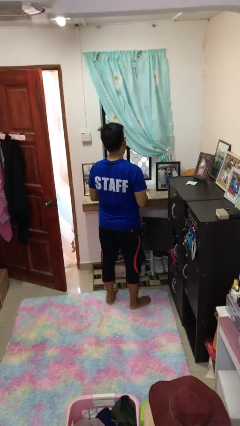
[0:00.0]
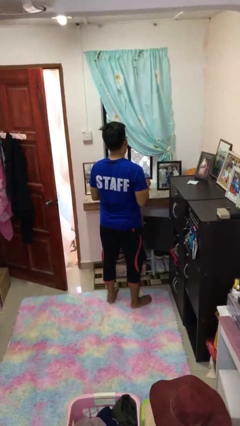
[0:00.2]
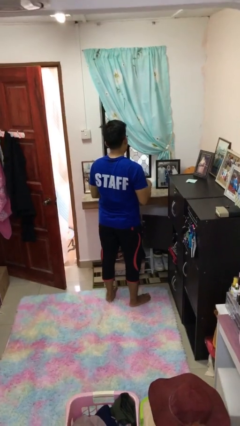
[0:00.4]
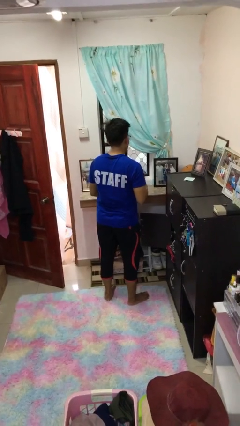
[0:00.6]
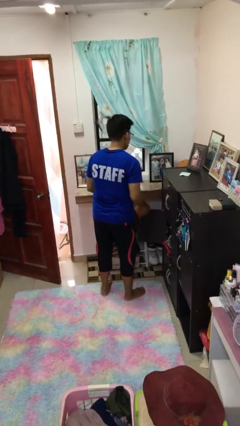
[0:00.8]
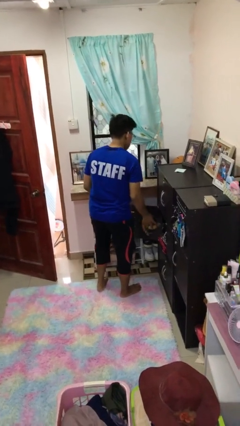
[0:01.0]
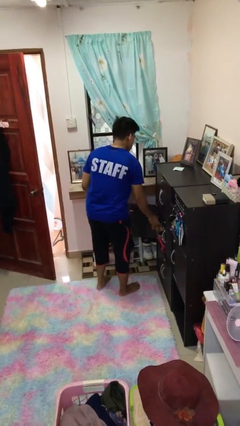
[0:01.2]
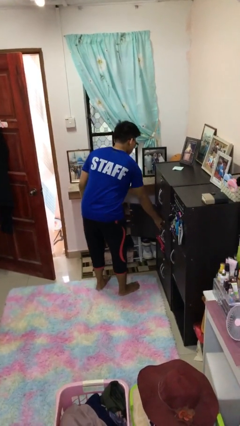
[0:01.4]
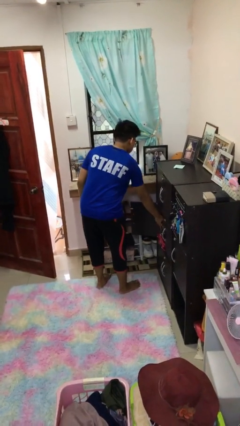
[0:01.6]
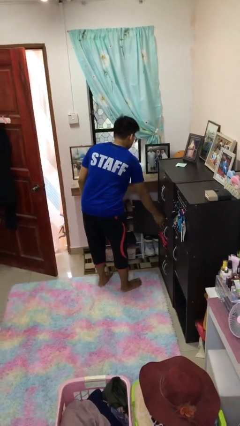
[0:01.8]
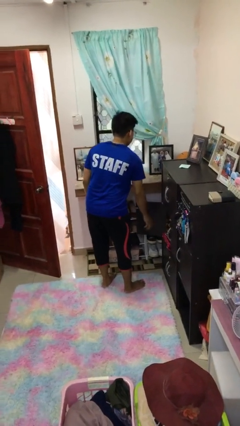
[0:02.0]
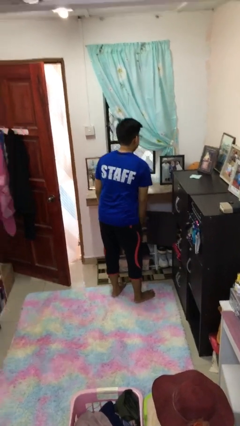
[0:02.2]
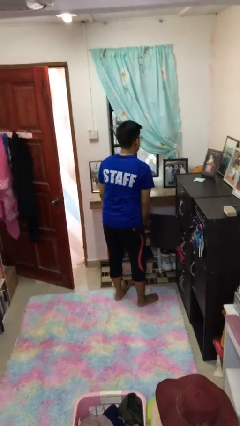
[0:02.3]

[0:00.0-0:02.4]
person puts down object into cabinet

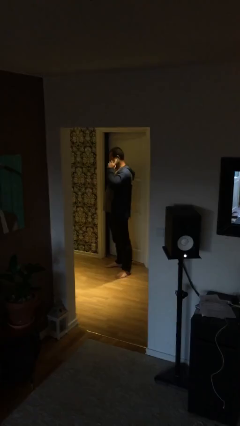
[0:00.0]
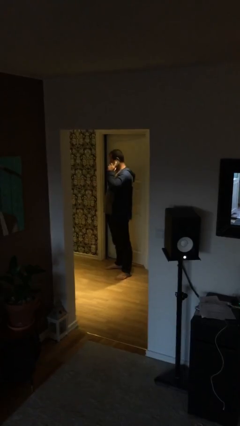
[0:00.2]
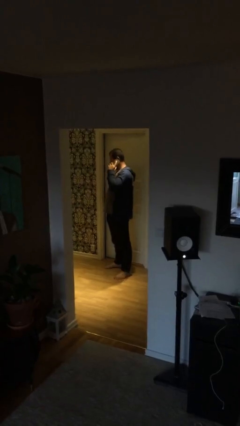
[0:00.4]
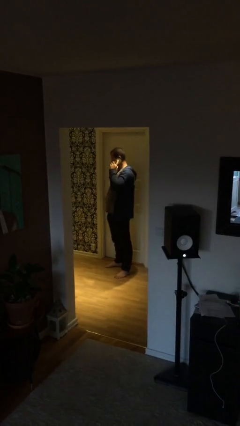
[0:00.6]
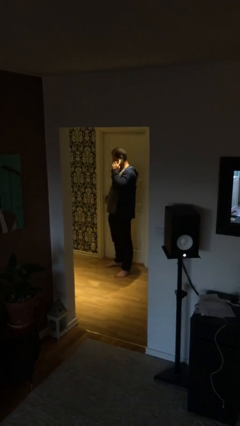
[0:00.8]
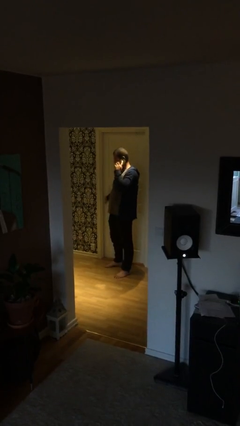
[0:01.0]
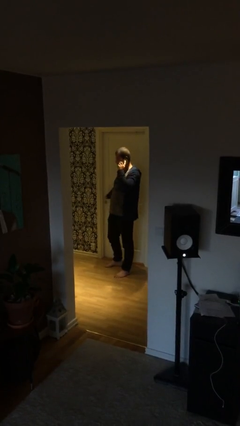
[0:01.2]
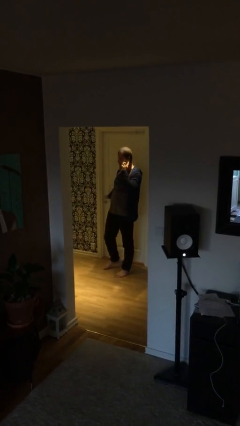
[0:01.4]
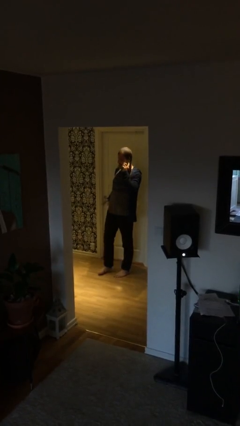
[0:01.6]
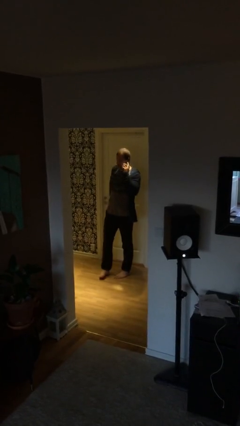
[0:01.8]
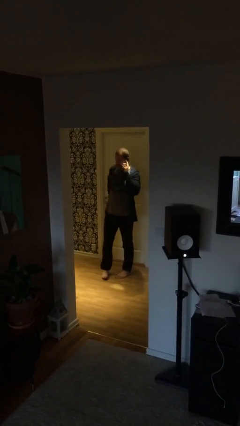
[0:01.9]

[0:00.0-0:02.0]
person closes facility door

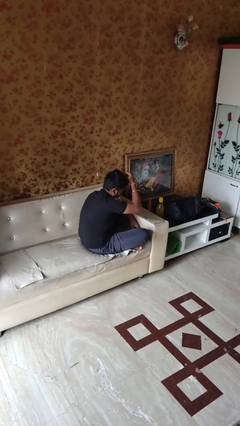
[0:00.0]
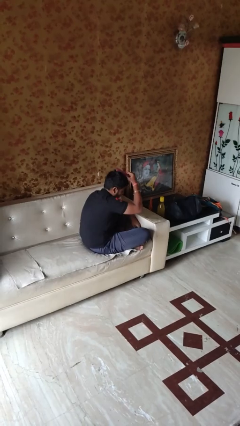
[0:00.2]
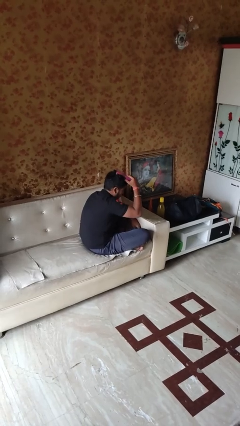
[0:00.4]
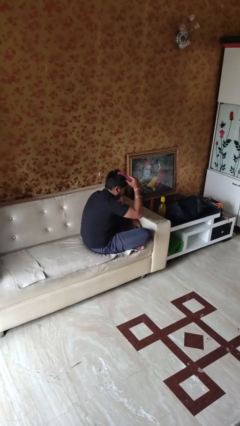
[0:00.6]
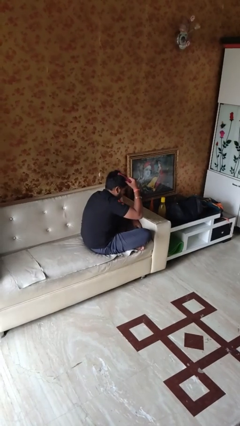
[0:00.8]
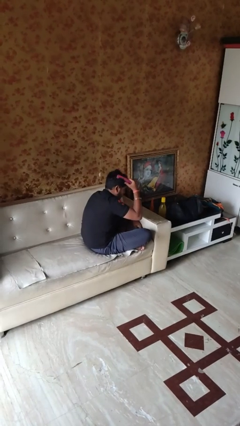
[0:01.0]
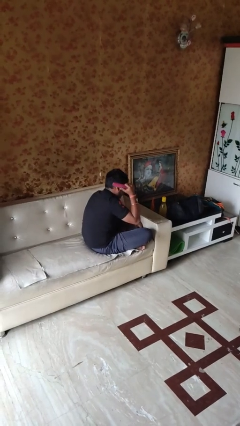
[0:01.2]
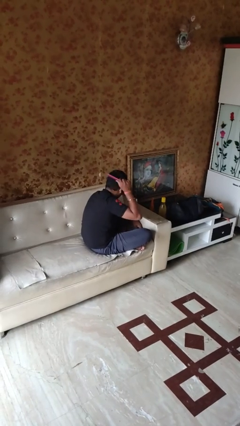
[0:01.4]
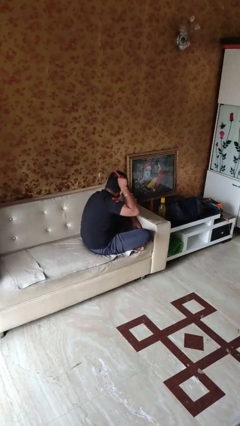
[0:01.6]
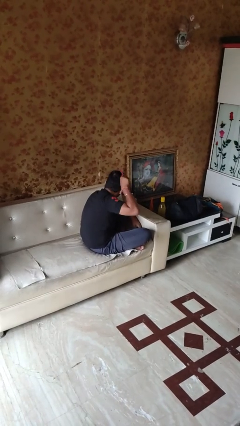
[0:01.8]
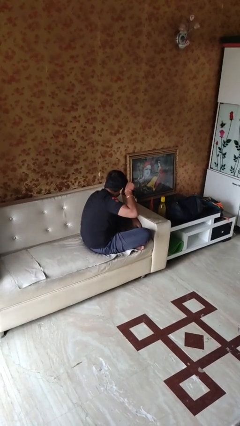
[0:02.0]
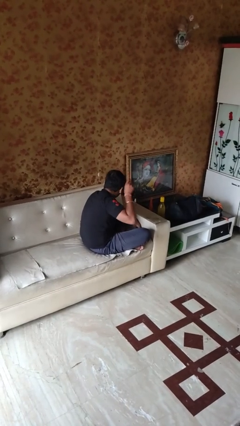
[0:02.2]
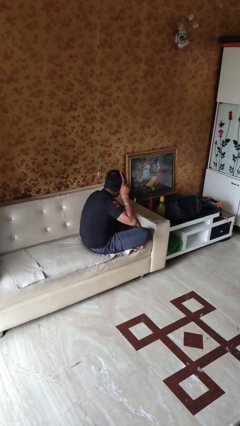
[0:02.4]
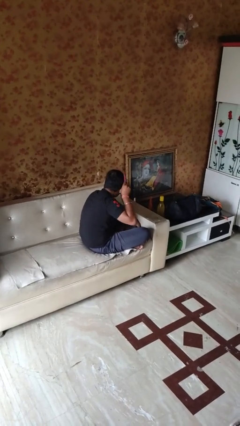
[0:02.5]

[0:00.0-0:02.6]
person brushes hair

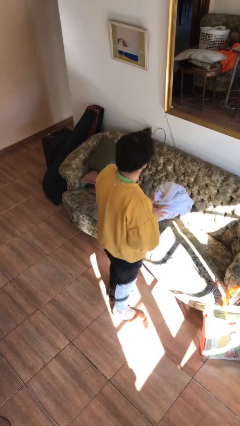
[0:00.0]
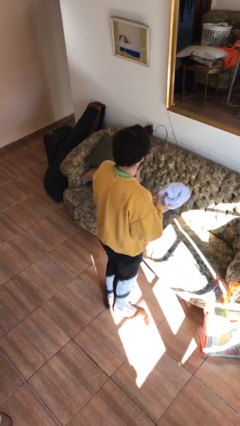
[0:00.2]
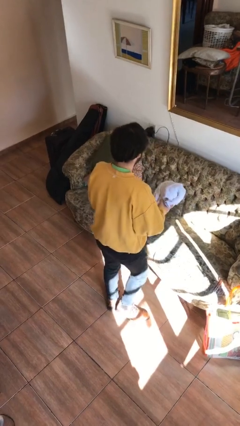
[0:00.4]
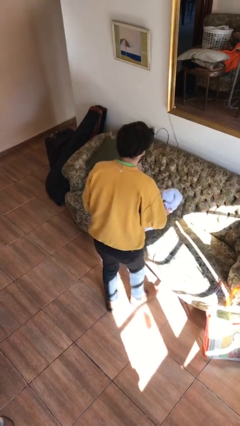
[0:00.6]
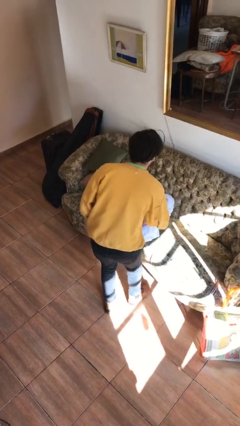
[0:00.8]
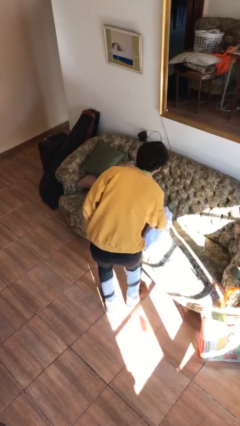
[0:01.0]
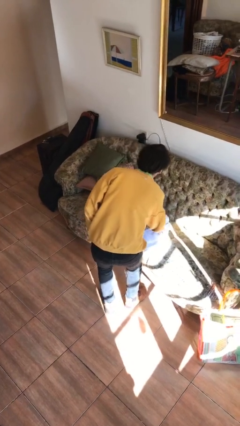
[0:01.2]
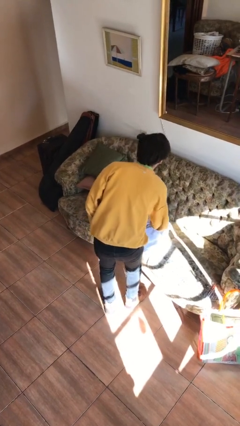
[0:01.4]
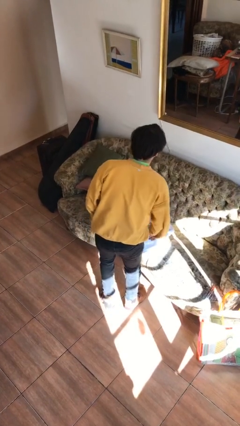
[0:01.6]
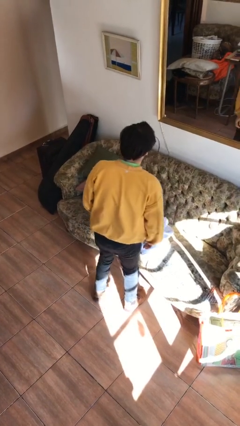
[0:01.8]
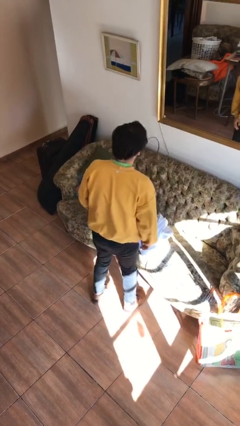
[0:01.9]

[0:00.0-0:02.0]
person puts down object on couch

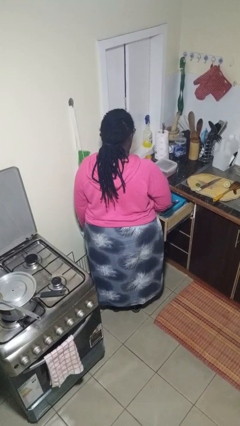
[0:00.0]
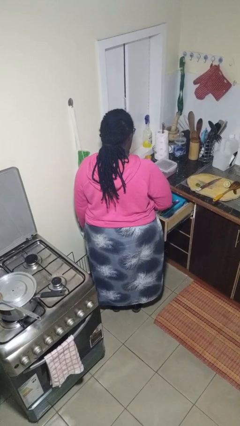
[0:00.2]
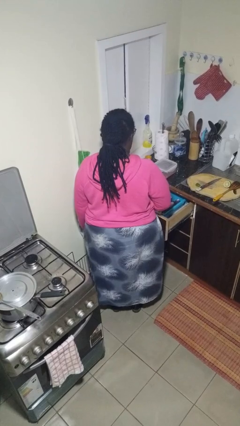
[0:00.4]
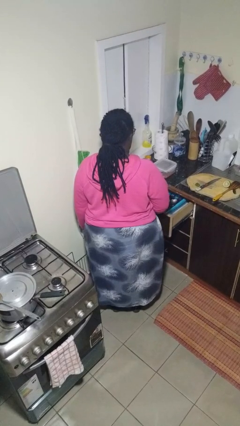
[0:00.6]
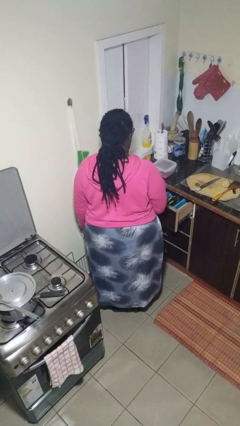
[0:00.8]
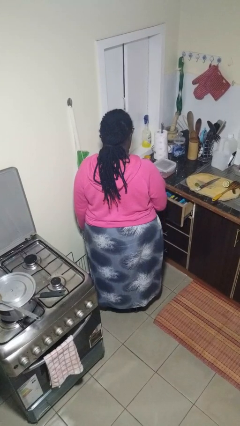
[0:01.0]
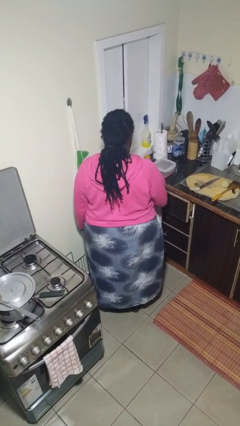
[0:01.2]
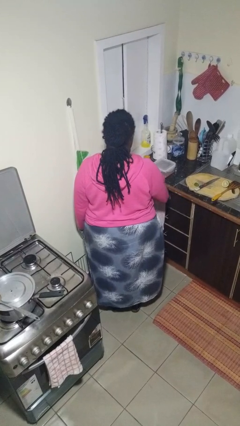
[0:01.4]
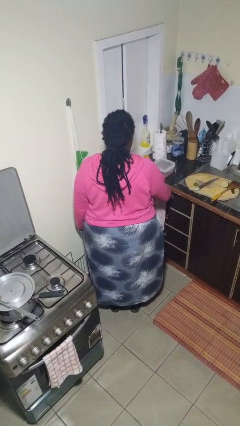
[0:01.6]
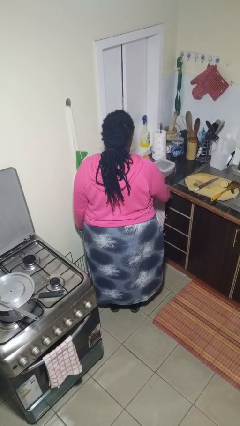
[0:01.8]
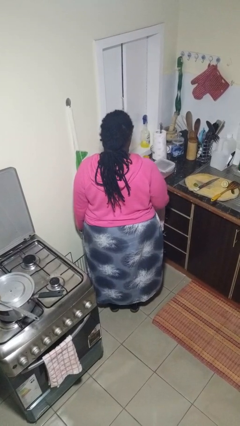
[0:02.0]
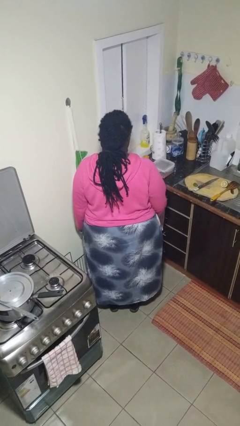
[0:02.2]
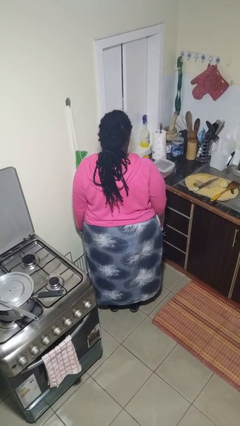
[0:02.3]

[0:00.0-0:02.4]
person closes kitchen drawer

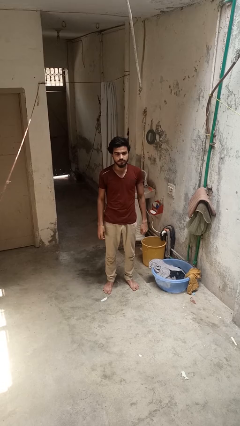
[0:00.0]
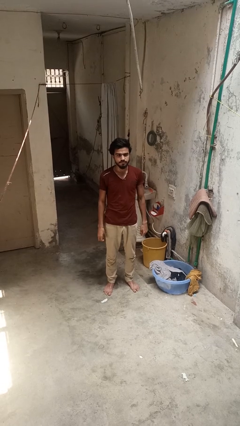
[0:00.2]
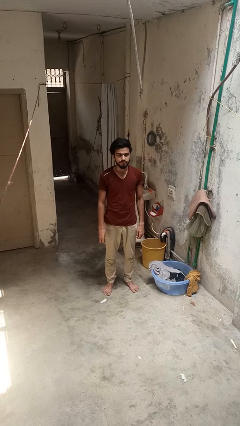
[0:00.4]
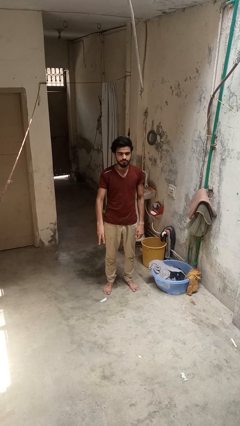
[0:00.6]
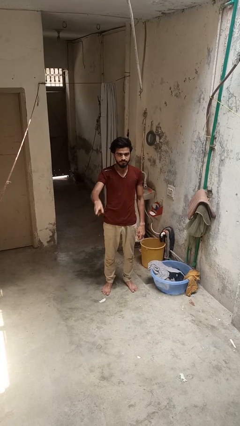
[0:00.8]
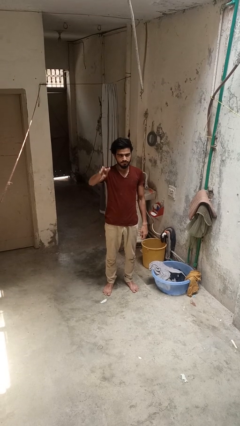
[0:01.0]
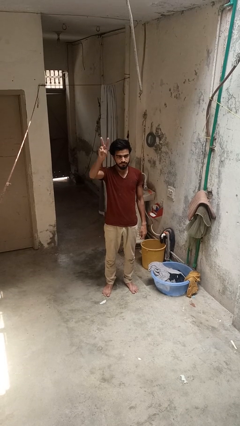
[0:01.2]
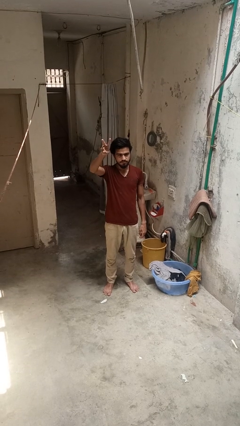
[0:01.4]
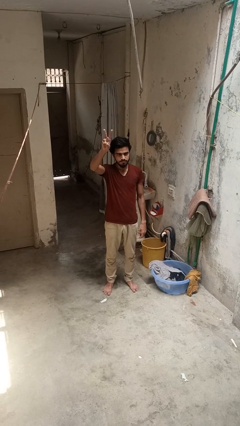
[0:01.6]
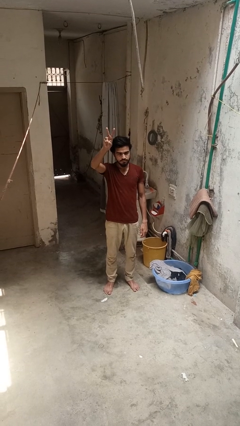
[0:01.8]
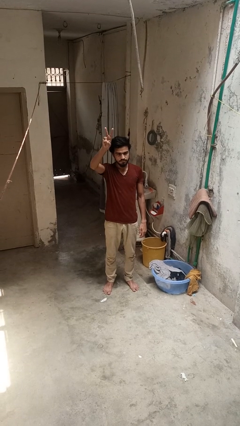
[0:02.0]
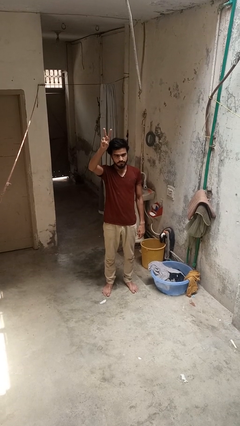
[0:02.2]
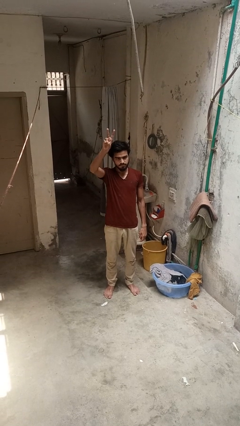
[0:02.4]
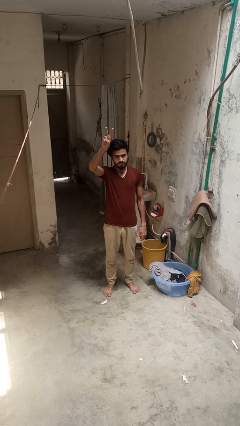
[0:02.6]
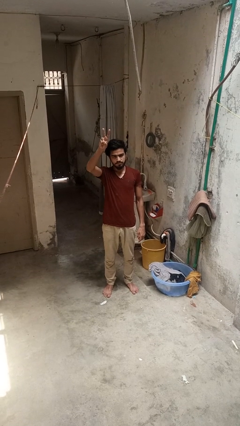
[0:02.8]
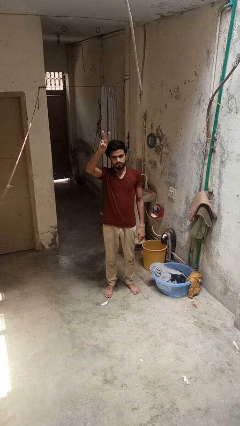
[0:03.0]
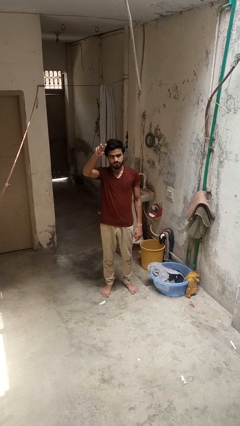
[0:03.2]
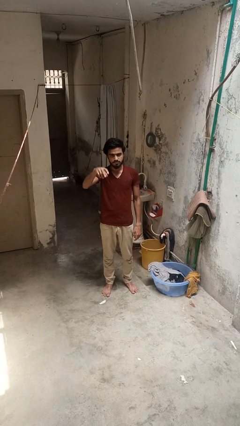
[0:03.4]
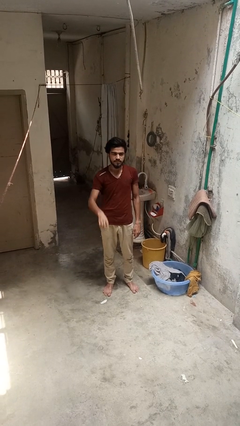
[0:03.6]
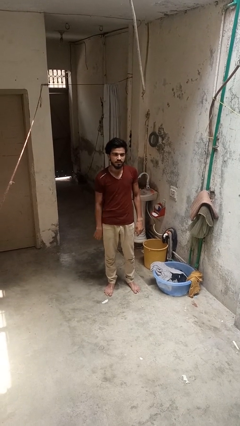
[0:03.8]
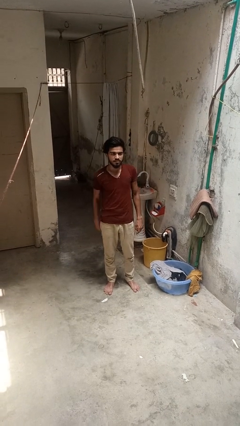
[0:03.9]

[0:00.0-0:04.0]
person gestures peace

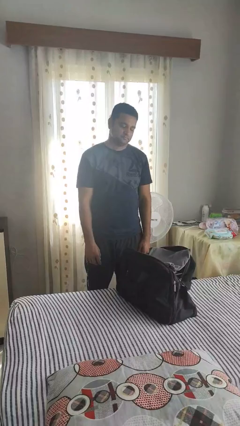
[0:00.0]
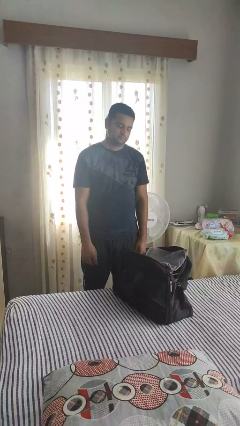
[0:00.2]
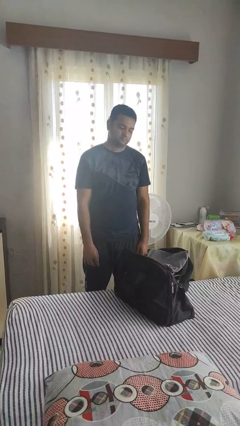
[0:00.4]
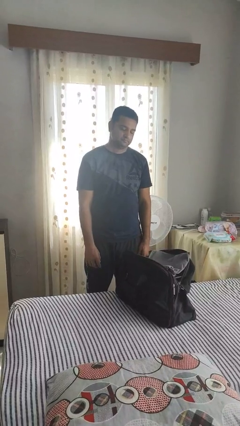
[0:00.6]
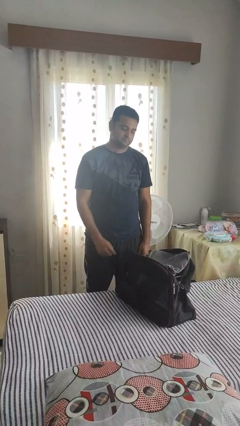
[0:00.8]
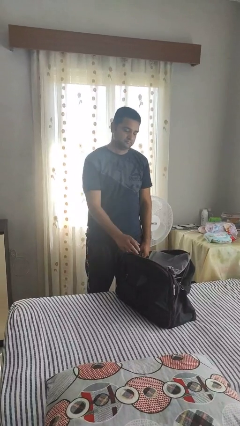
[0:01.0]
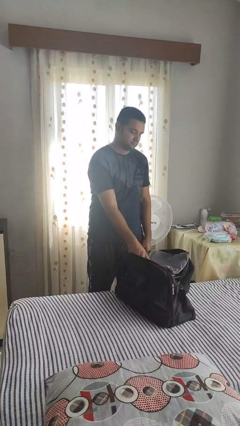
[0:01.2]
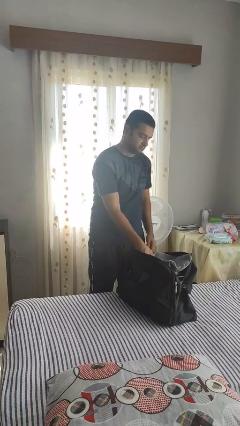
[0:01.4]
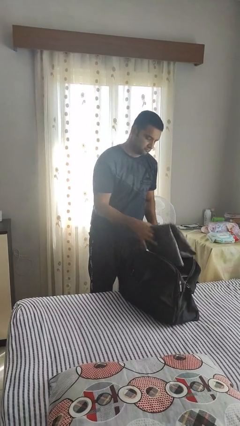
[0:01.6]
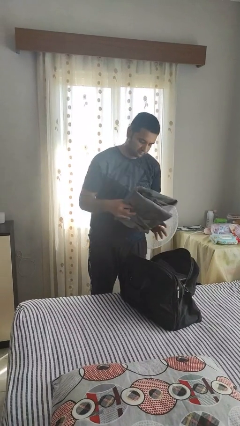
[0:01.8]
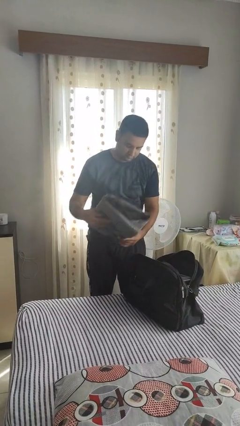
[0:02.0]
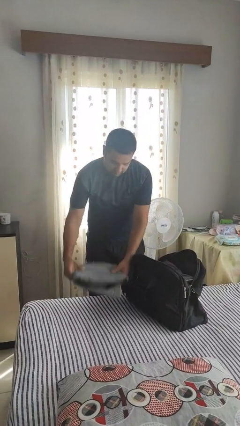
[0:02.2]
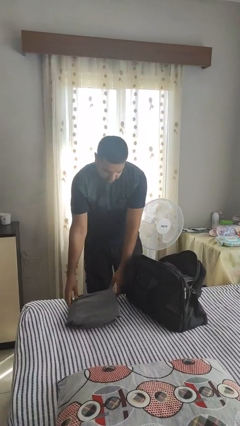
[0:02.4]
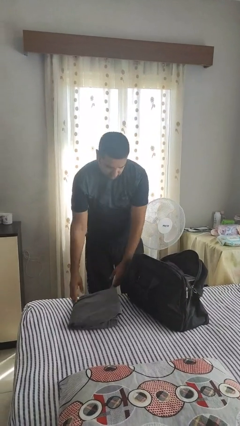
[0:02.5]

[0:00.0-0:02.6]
person unloads clothes from suitcase
